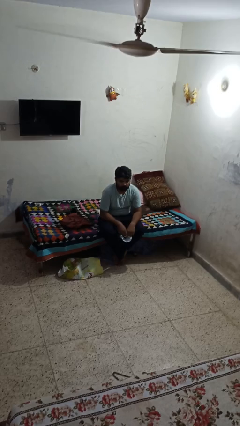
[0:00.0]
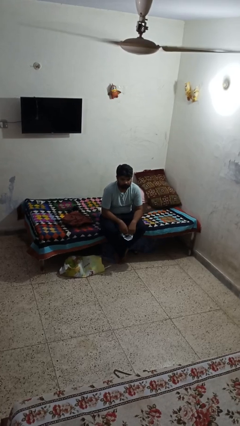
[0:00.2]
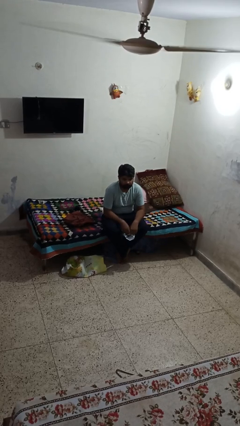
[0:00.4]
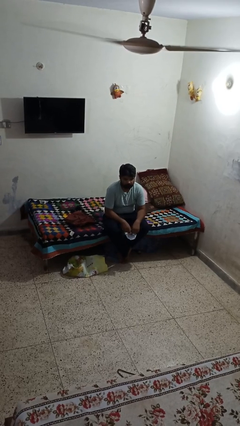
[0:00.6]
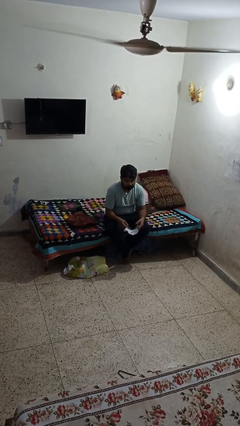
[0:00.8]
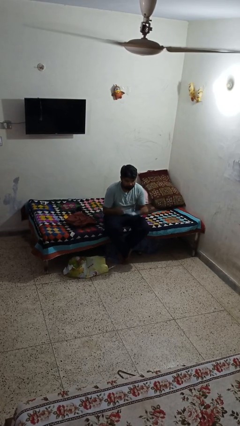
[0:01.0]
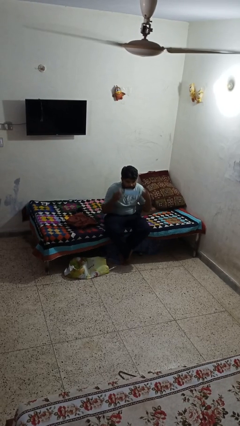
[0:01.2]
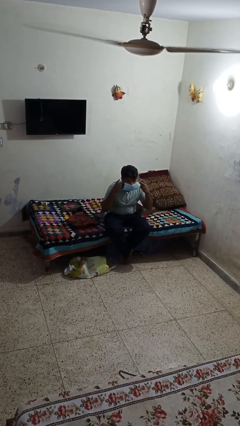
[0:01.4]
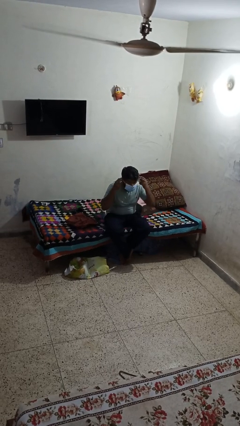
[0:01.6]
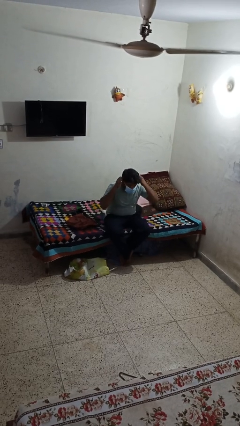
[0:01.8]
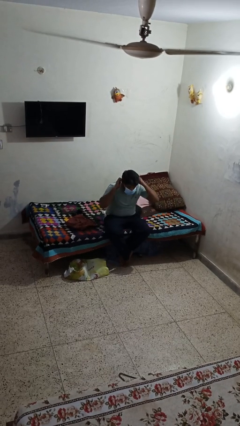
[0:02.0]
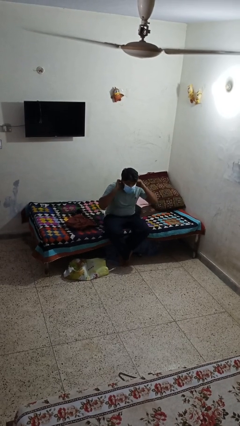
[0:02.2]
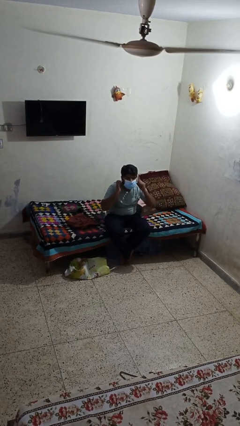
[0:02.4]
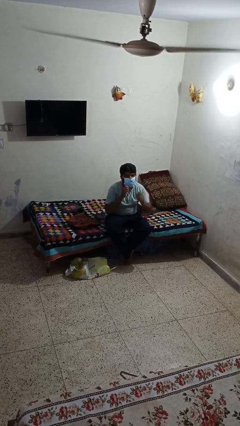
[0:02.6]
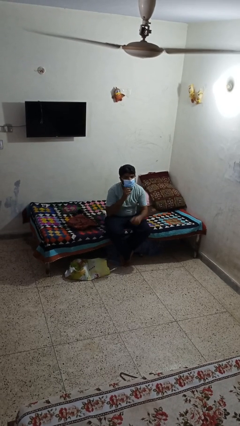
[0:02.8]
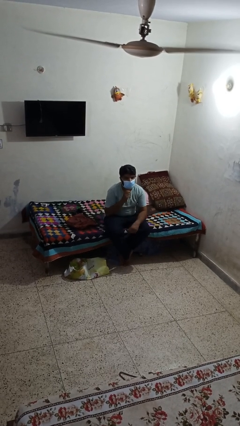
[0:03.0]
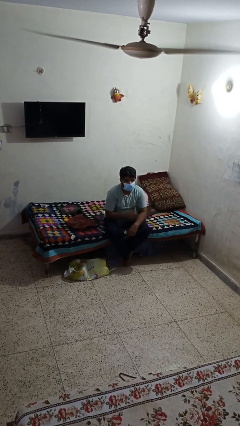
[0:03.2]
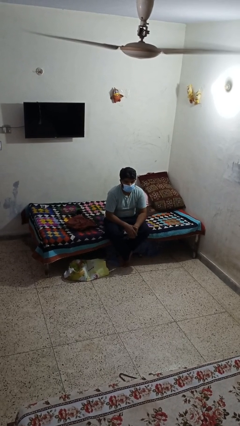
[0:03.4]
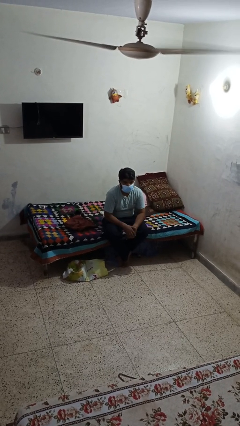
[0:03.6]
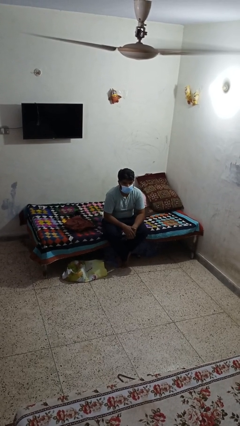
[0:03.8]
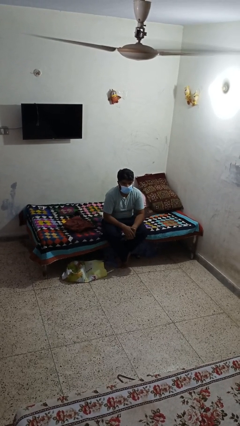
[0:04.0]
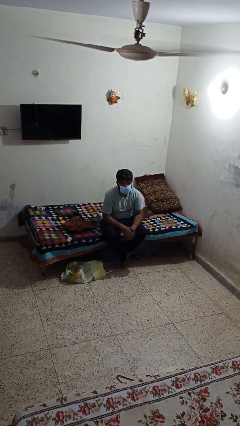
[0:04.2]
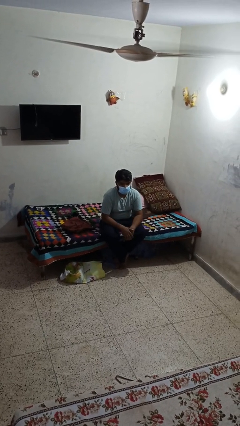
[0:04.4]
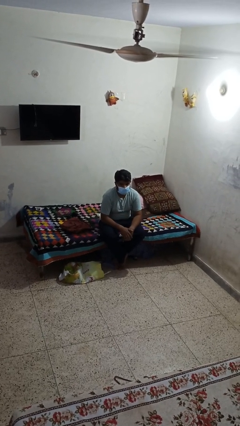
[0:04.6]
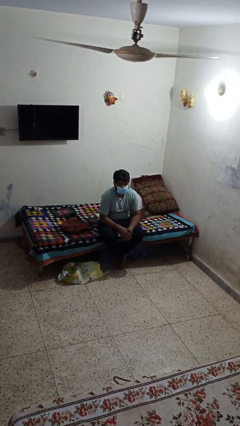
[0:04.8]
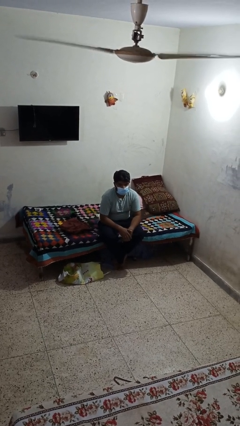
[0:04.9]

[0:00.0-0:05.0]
person puts on facemask

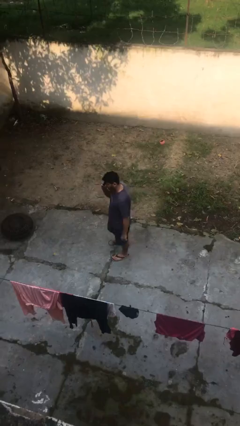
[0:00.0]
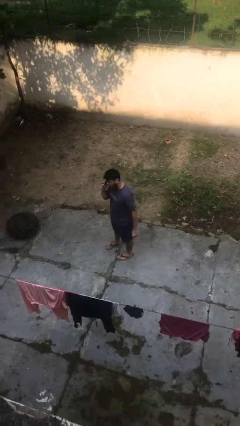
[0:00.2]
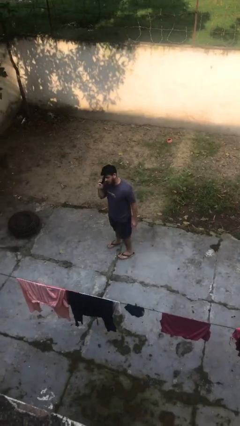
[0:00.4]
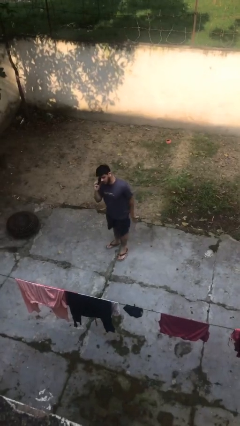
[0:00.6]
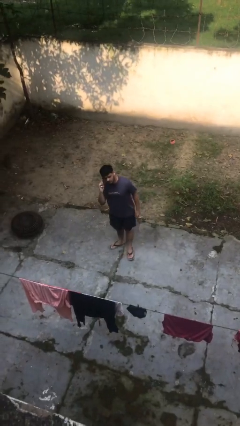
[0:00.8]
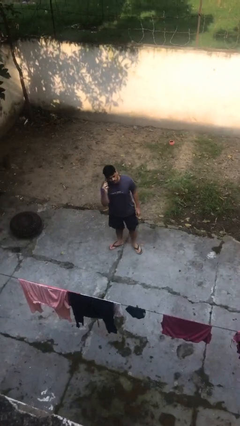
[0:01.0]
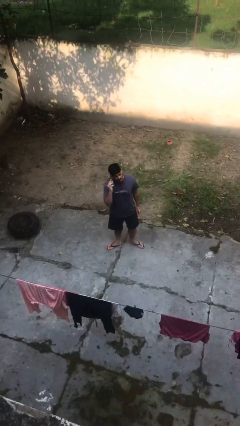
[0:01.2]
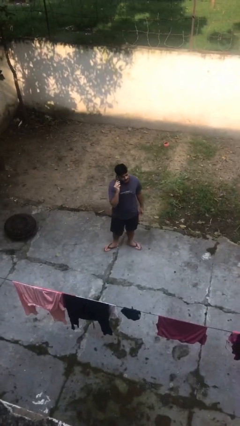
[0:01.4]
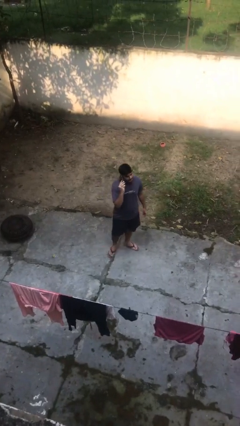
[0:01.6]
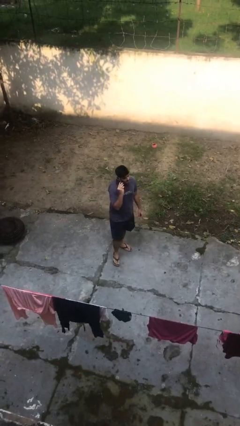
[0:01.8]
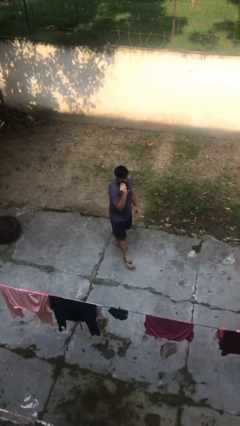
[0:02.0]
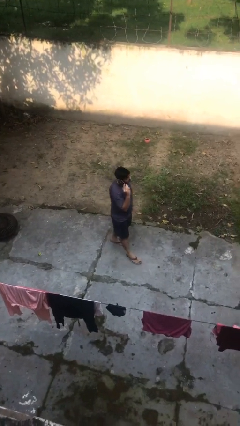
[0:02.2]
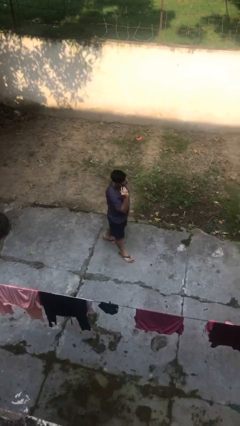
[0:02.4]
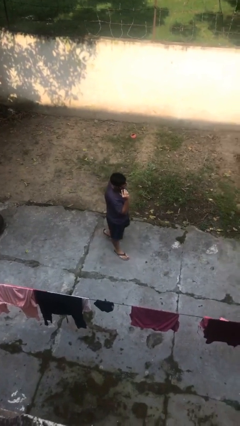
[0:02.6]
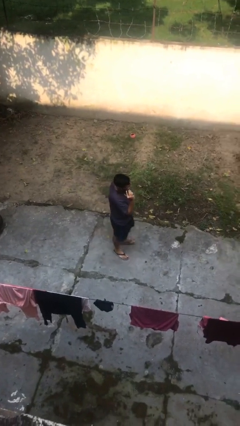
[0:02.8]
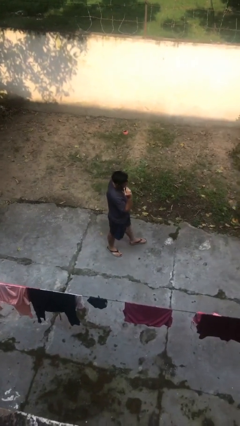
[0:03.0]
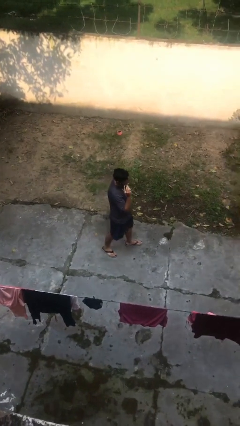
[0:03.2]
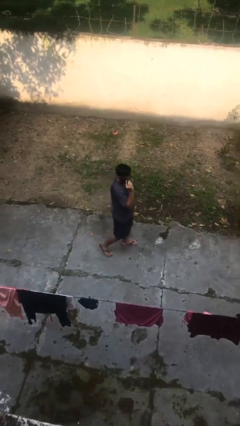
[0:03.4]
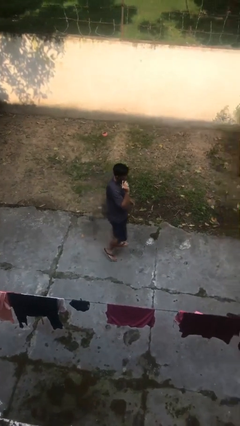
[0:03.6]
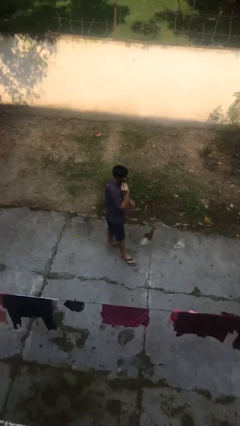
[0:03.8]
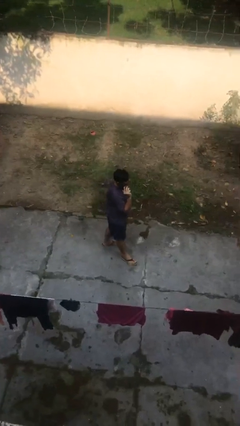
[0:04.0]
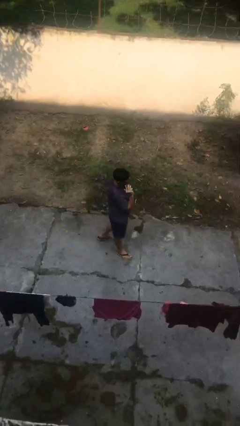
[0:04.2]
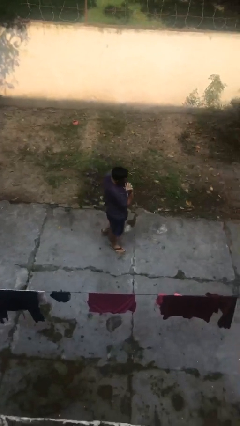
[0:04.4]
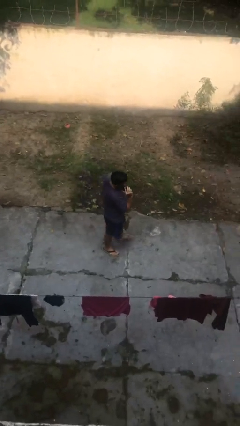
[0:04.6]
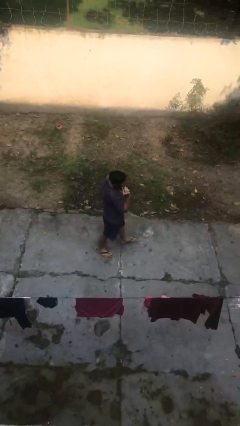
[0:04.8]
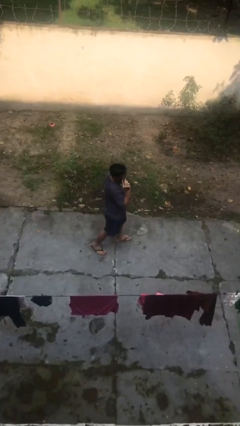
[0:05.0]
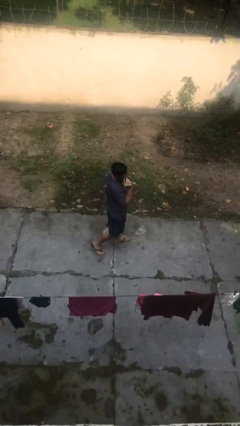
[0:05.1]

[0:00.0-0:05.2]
person talks on phone

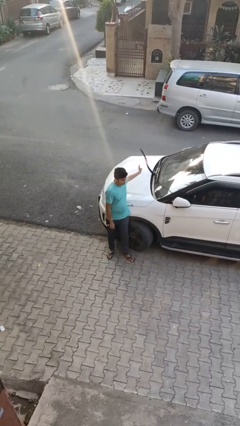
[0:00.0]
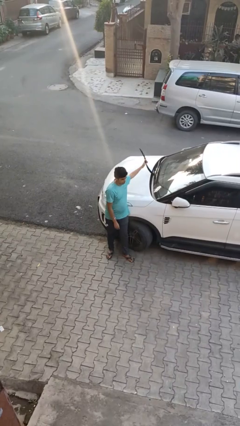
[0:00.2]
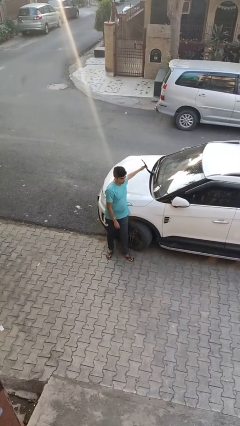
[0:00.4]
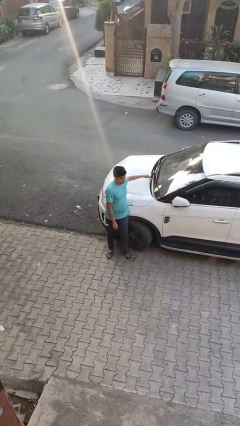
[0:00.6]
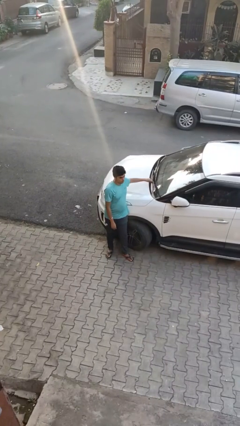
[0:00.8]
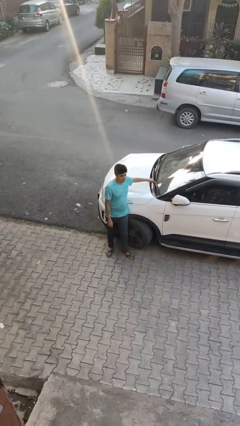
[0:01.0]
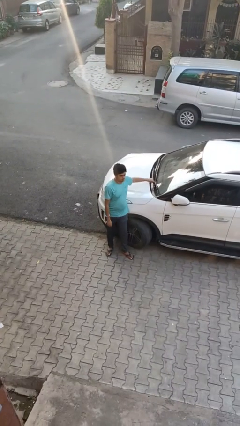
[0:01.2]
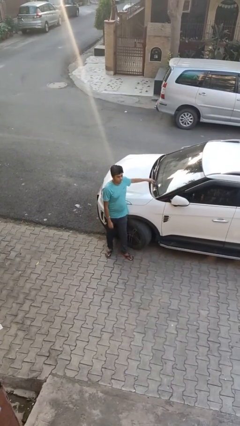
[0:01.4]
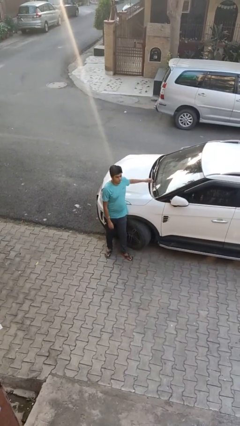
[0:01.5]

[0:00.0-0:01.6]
person flips down car wipers

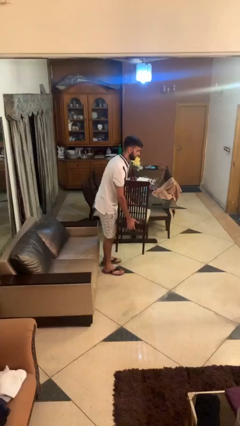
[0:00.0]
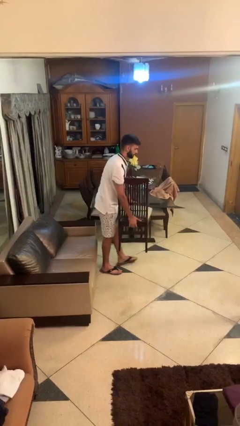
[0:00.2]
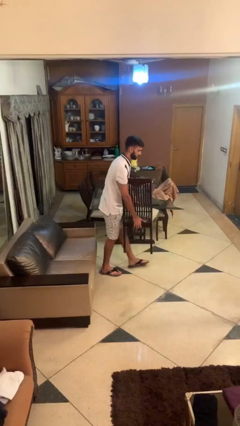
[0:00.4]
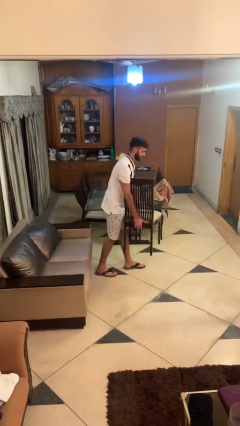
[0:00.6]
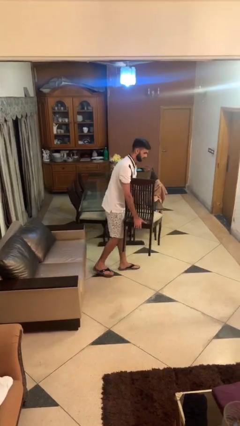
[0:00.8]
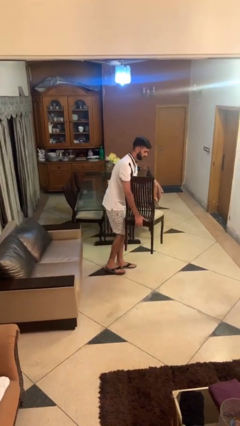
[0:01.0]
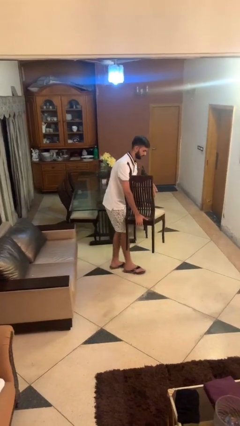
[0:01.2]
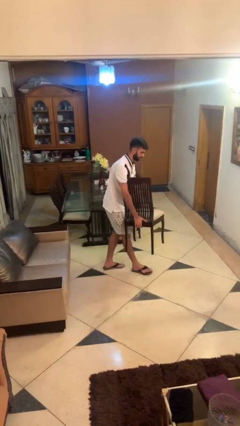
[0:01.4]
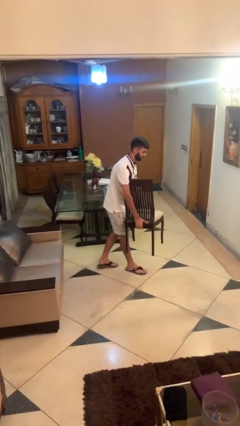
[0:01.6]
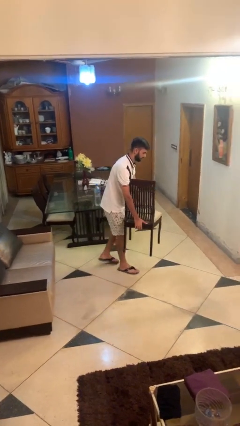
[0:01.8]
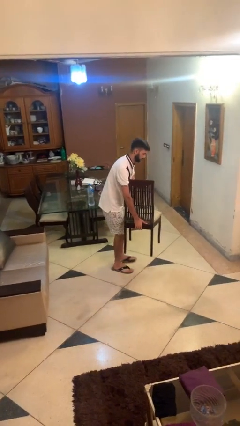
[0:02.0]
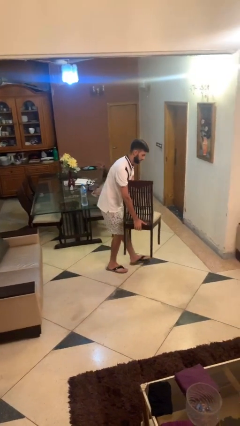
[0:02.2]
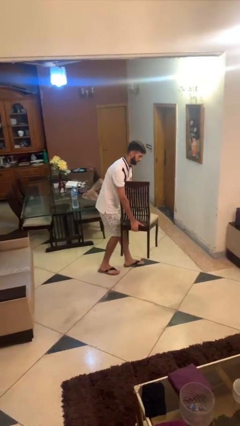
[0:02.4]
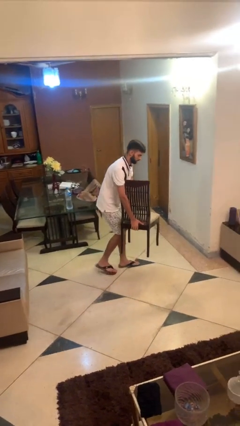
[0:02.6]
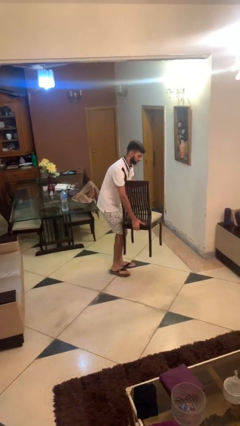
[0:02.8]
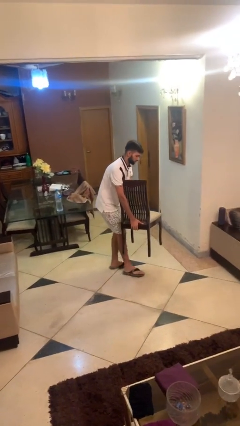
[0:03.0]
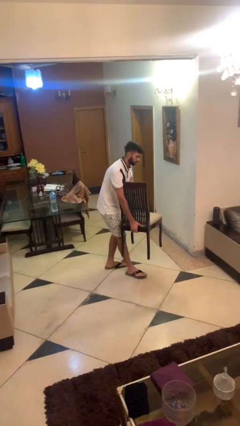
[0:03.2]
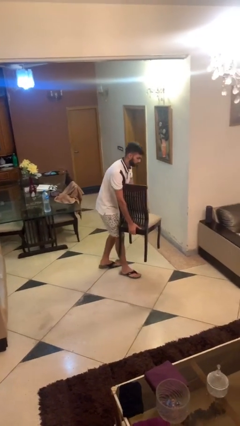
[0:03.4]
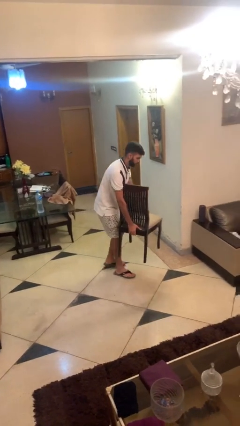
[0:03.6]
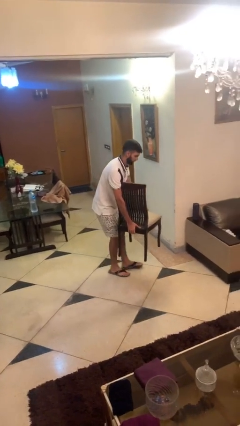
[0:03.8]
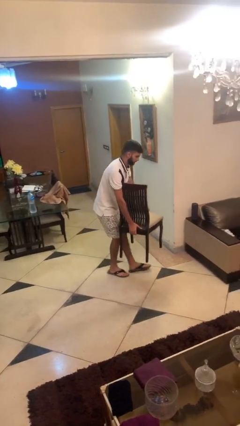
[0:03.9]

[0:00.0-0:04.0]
person carries heavy object

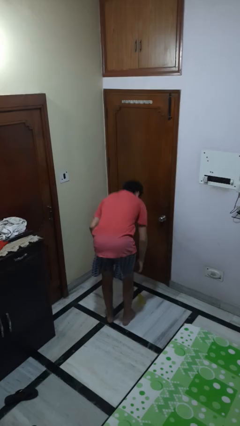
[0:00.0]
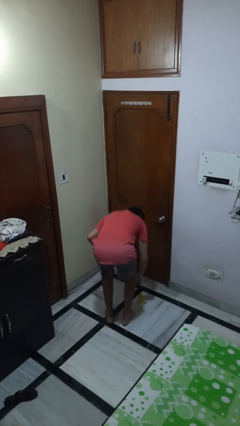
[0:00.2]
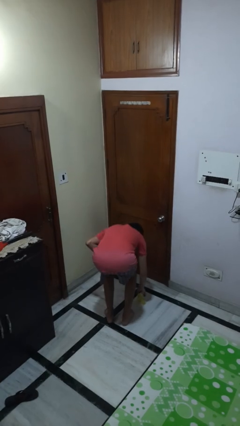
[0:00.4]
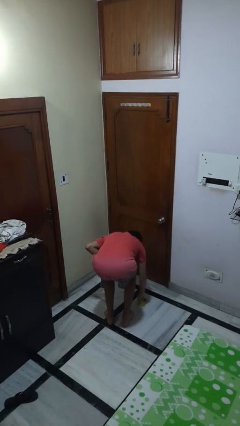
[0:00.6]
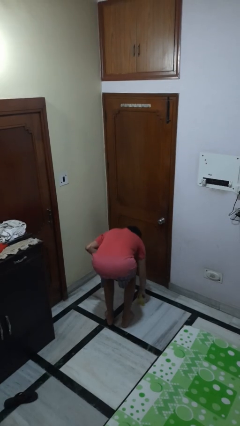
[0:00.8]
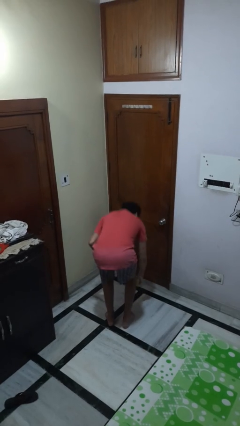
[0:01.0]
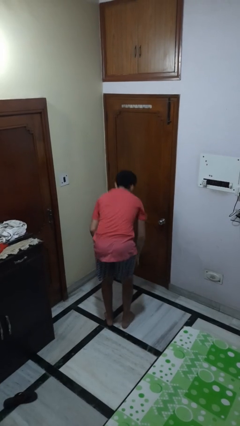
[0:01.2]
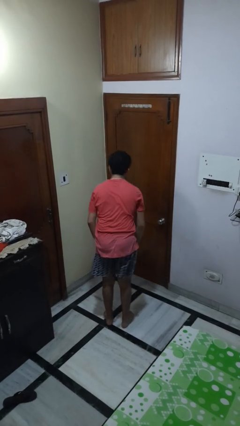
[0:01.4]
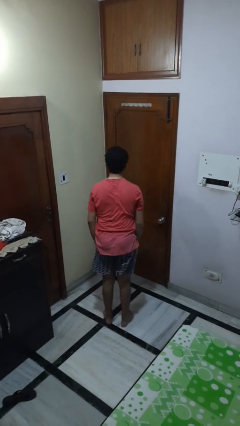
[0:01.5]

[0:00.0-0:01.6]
person picks up object from floor

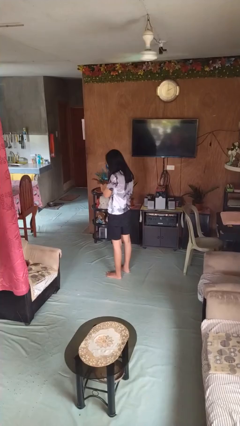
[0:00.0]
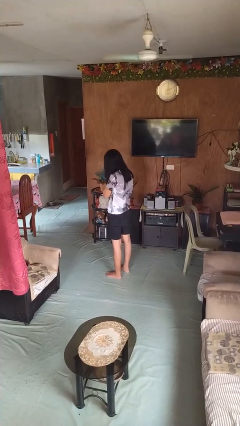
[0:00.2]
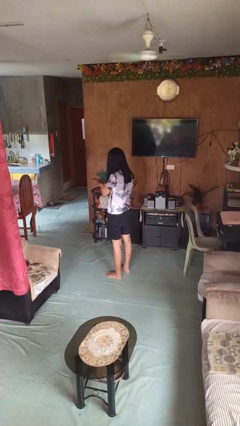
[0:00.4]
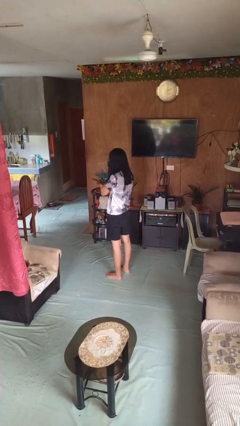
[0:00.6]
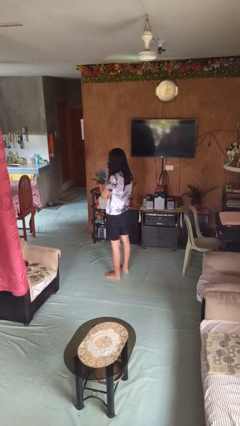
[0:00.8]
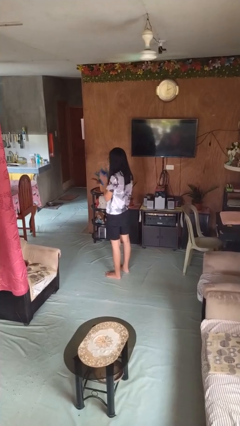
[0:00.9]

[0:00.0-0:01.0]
person blows nose
